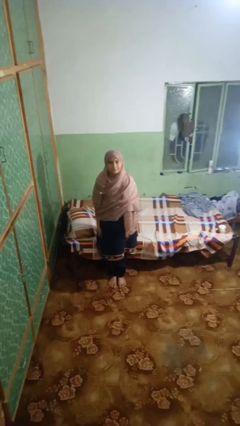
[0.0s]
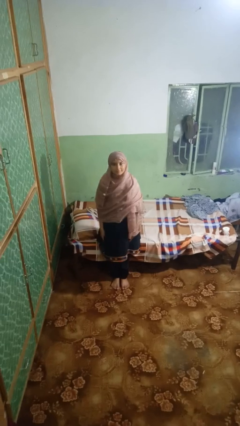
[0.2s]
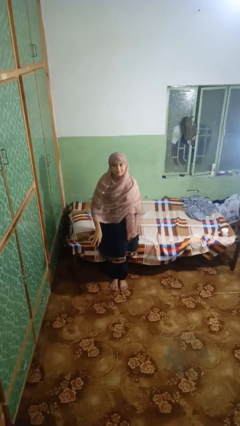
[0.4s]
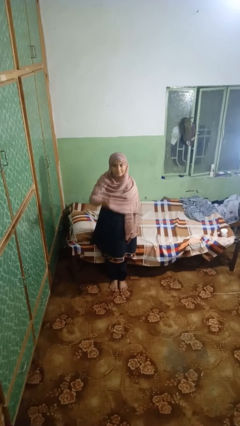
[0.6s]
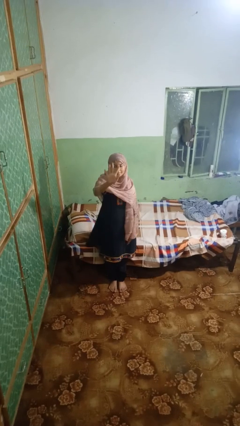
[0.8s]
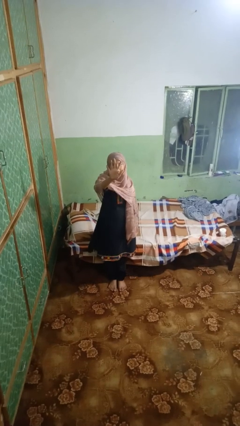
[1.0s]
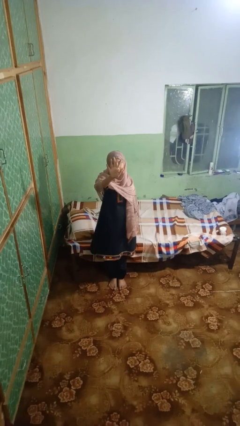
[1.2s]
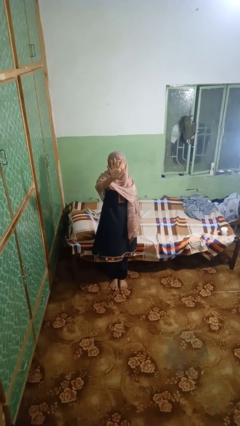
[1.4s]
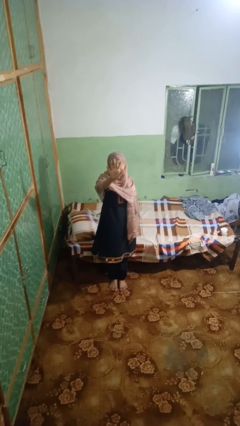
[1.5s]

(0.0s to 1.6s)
person gestures number five

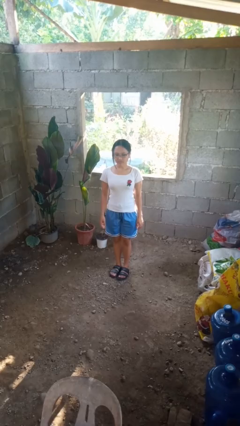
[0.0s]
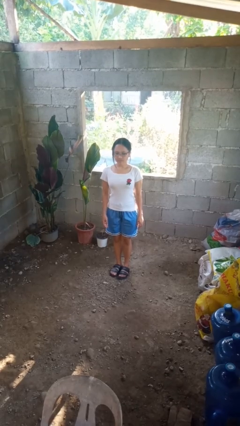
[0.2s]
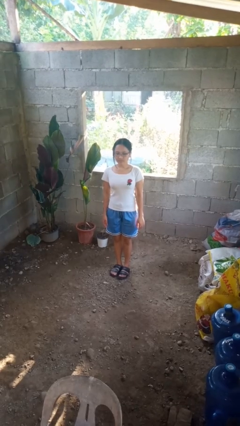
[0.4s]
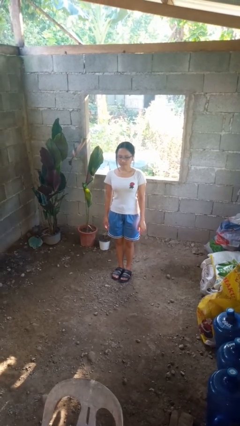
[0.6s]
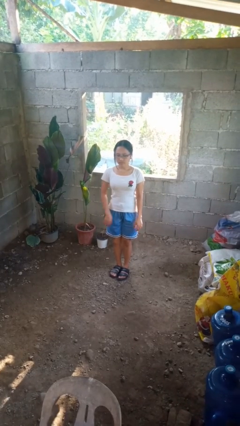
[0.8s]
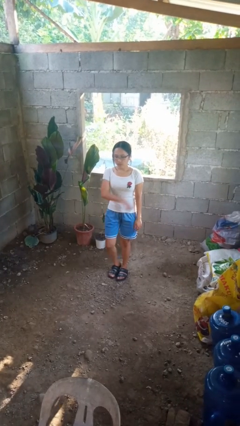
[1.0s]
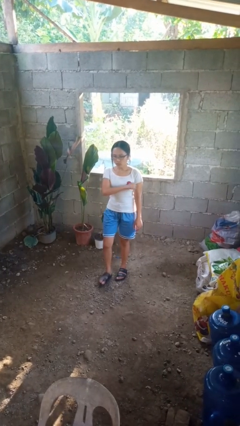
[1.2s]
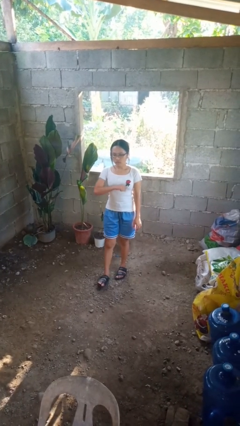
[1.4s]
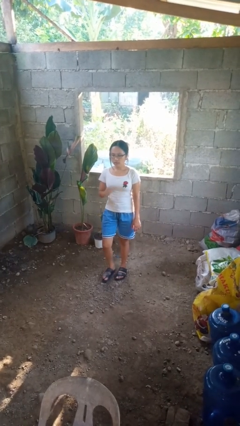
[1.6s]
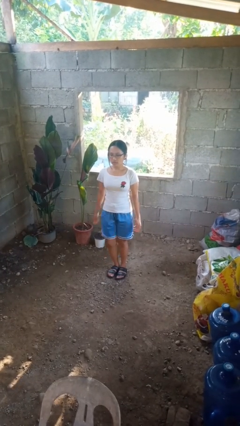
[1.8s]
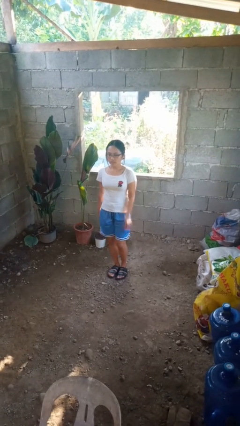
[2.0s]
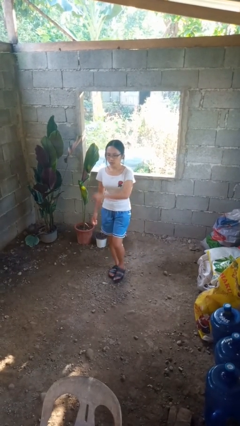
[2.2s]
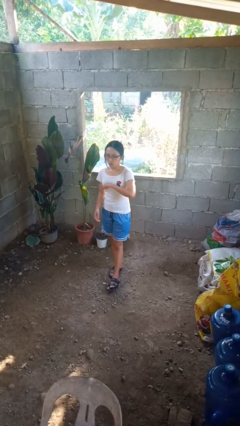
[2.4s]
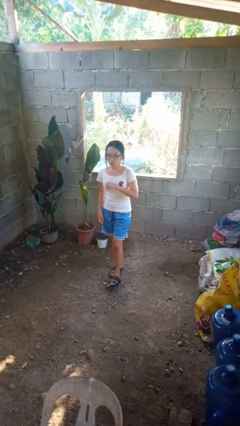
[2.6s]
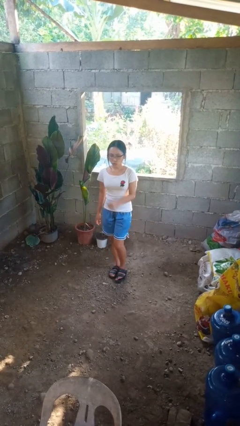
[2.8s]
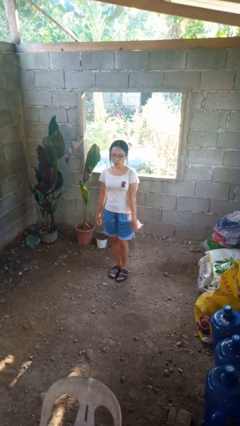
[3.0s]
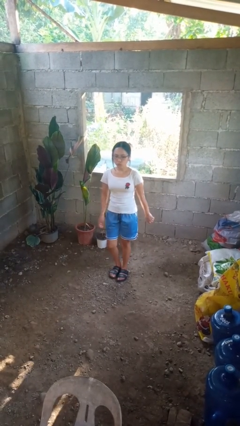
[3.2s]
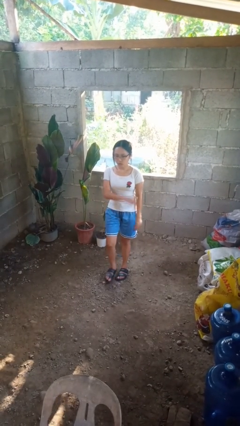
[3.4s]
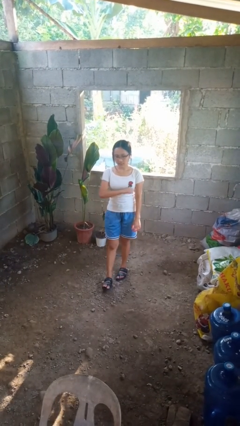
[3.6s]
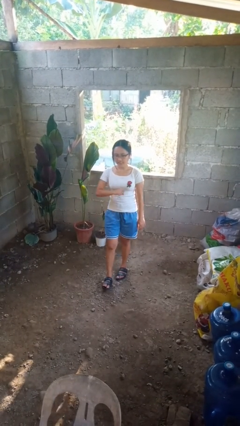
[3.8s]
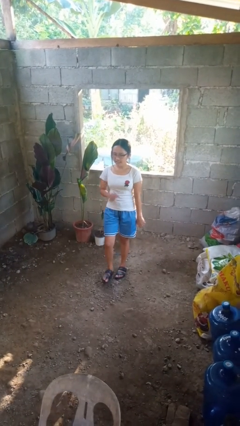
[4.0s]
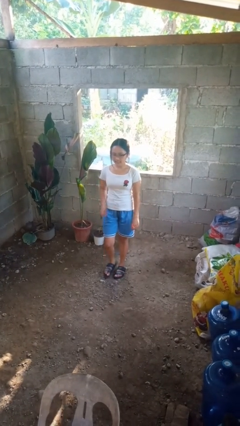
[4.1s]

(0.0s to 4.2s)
person dances in place

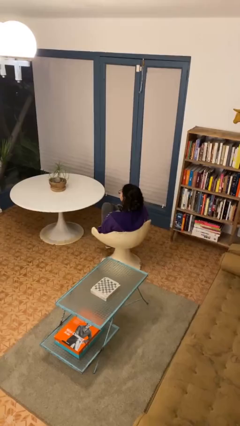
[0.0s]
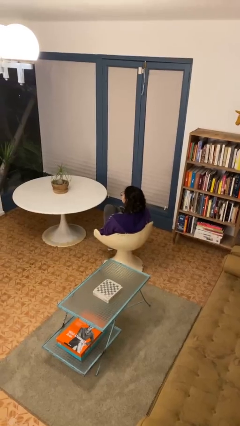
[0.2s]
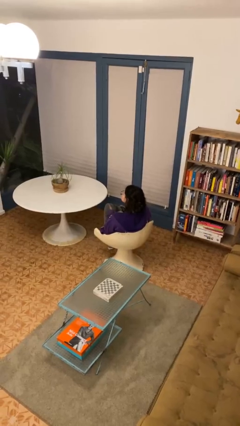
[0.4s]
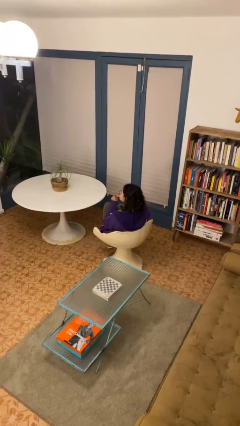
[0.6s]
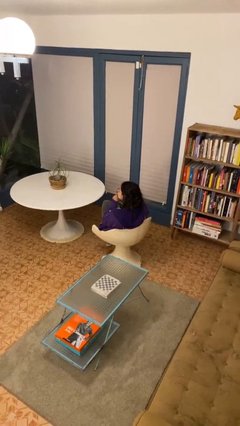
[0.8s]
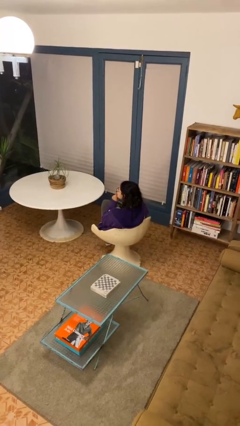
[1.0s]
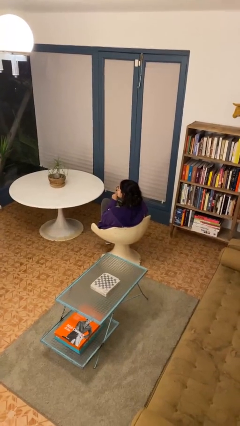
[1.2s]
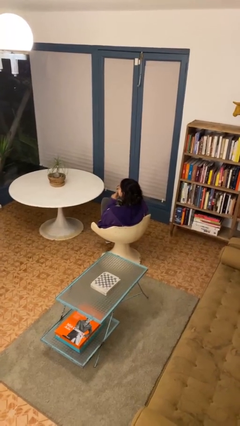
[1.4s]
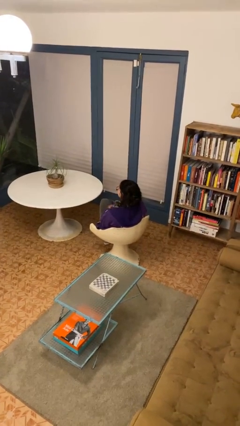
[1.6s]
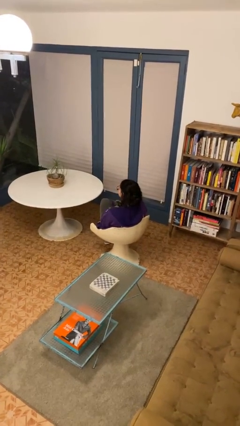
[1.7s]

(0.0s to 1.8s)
person gestures be quiet

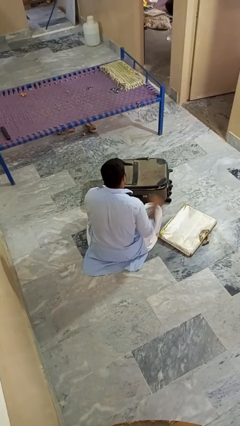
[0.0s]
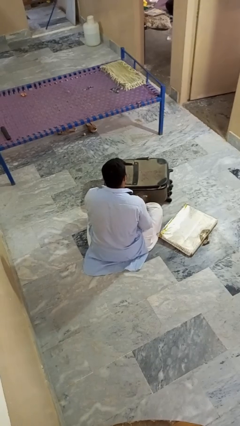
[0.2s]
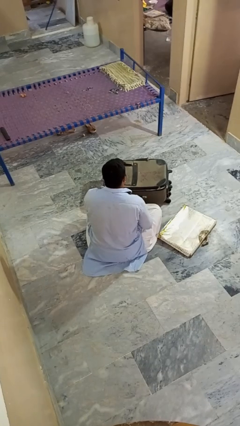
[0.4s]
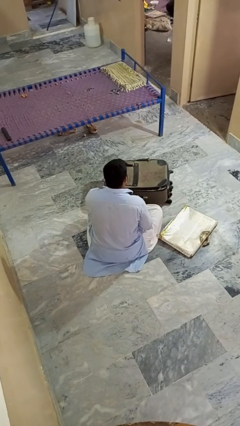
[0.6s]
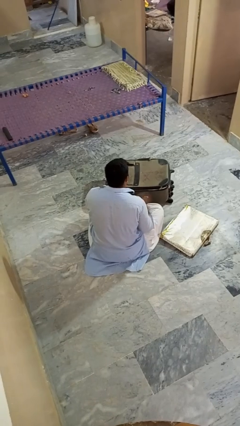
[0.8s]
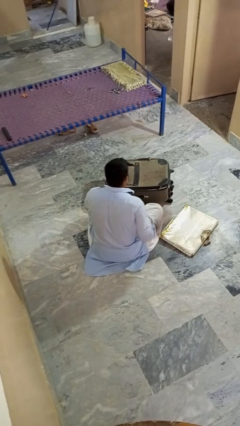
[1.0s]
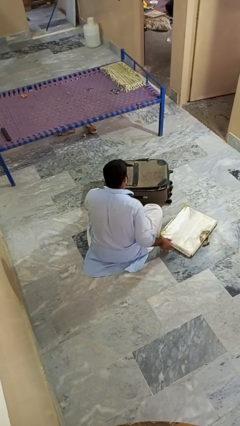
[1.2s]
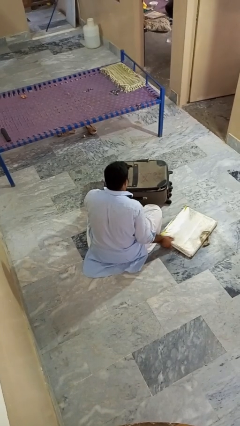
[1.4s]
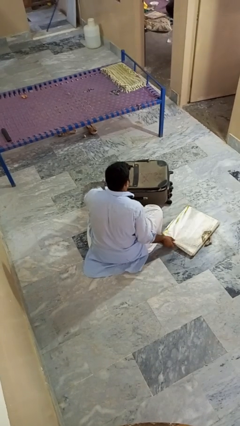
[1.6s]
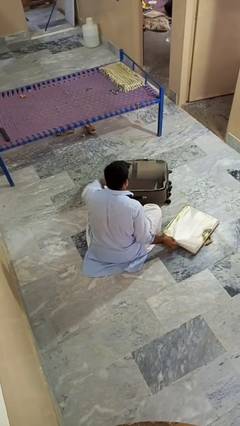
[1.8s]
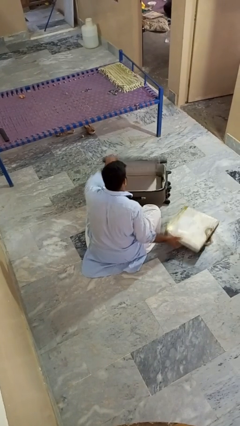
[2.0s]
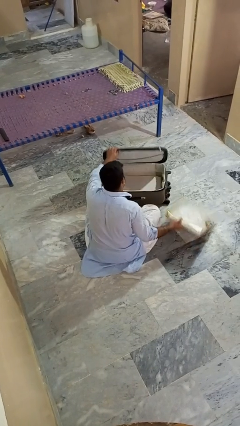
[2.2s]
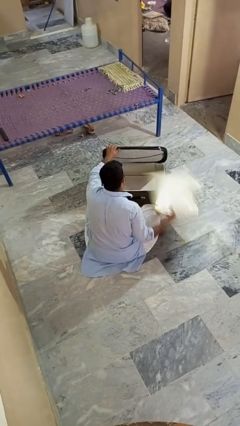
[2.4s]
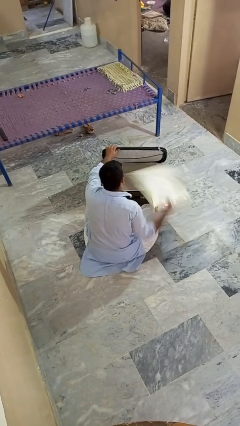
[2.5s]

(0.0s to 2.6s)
person puts object into bag

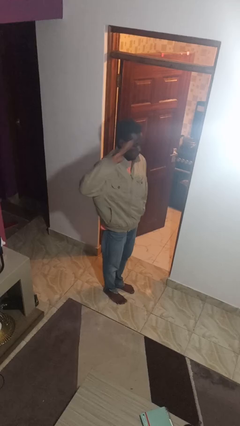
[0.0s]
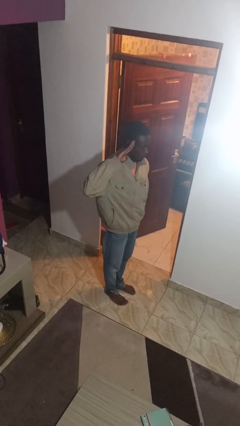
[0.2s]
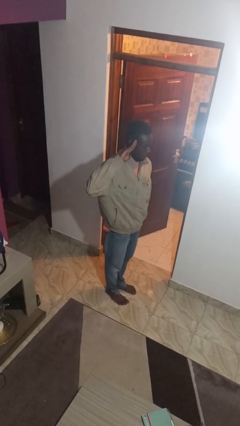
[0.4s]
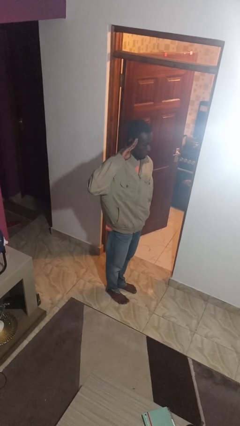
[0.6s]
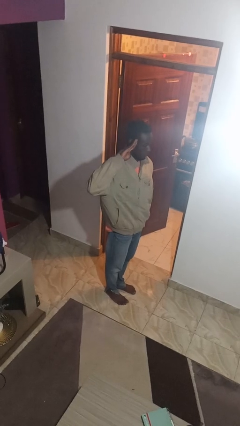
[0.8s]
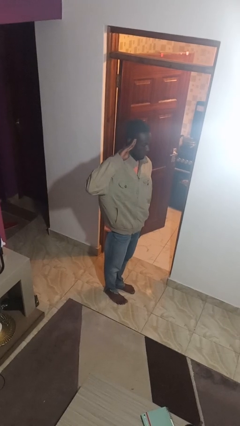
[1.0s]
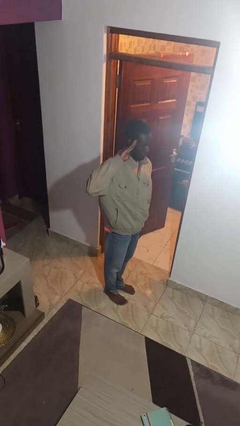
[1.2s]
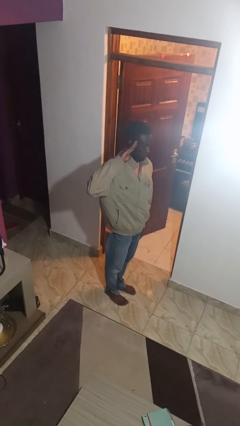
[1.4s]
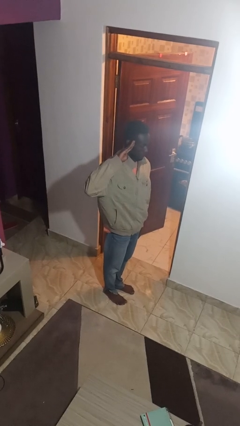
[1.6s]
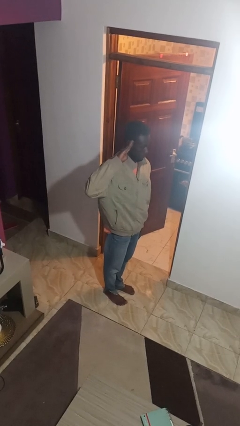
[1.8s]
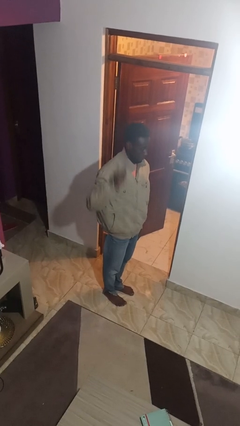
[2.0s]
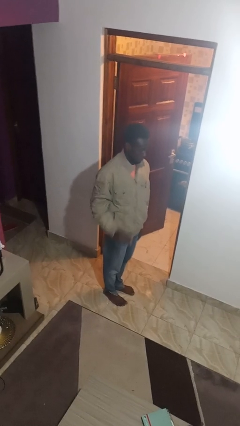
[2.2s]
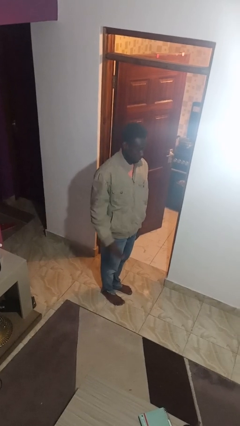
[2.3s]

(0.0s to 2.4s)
person salutes

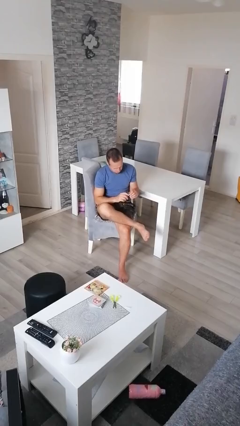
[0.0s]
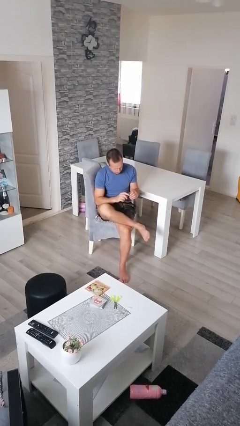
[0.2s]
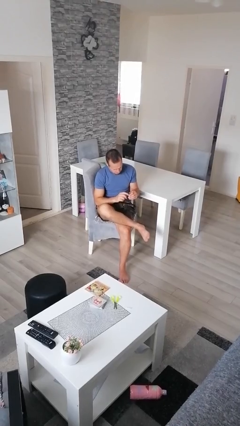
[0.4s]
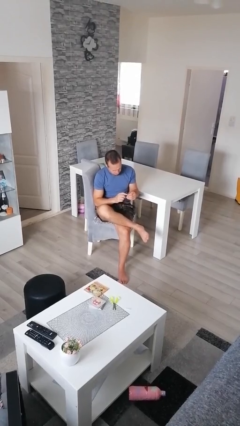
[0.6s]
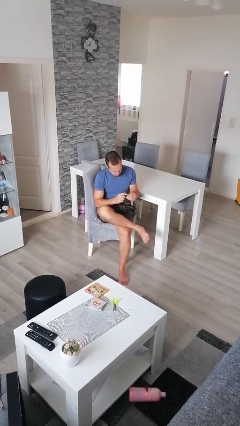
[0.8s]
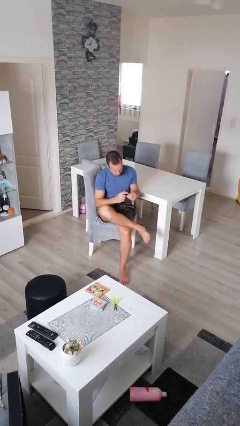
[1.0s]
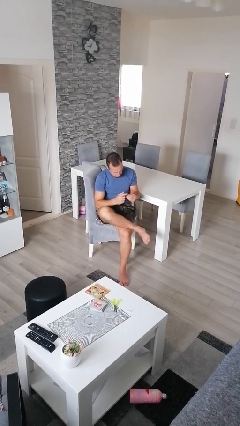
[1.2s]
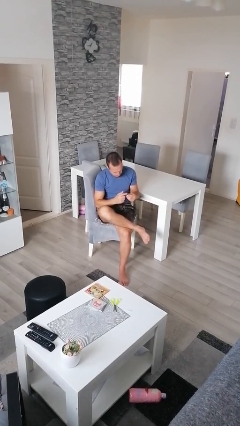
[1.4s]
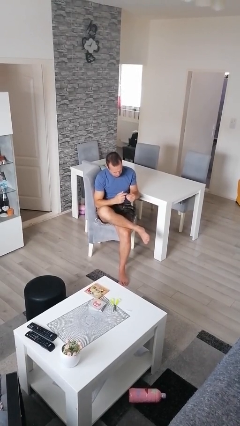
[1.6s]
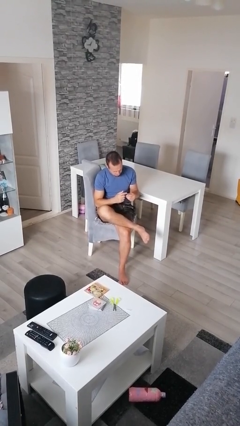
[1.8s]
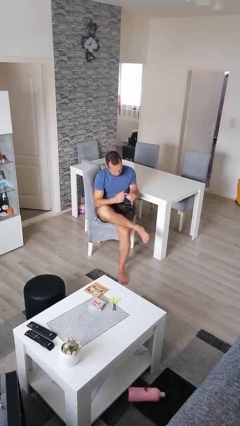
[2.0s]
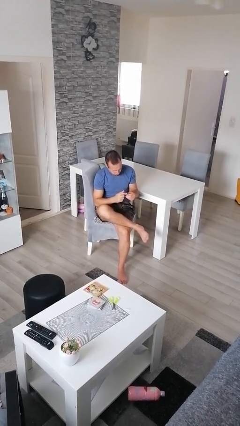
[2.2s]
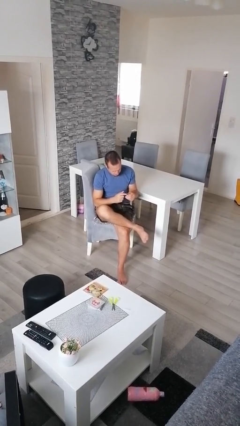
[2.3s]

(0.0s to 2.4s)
person files fingernails

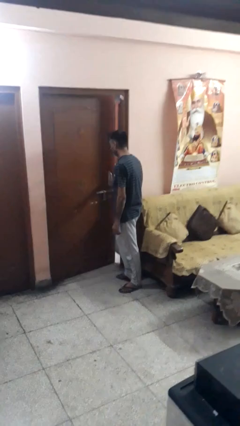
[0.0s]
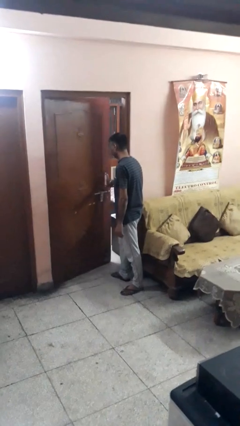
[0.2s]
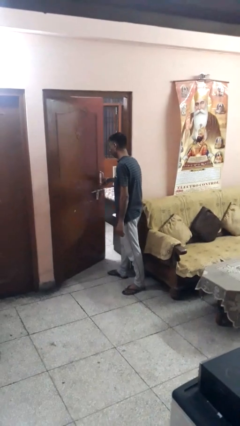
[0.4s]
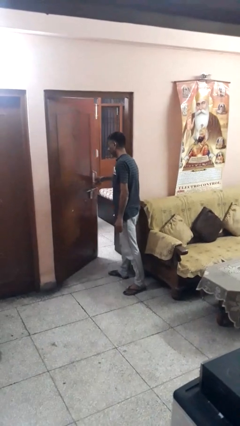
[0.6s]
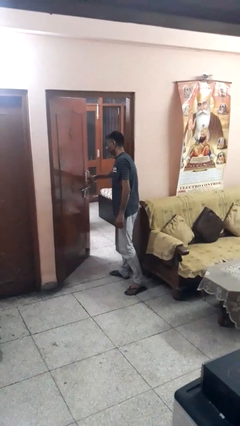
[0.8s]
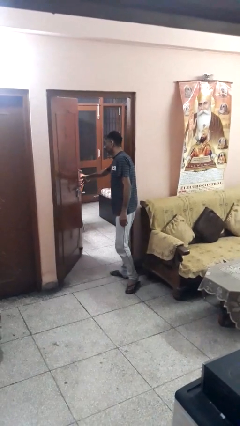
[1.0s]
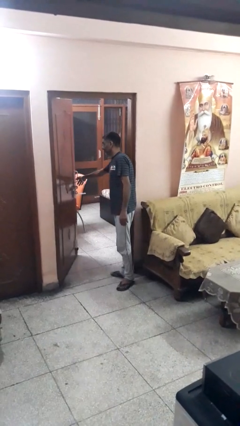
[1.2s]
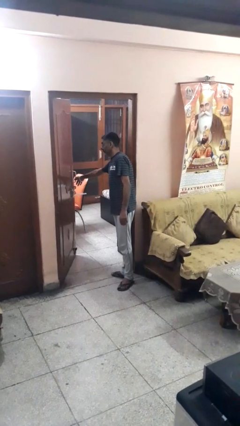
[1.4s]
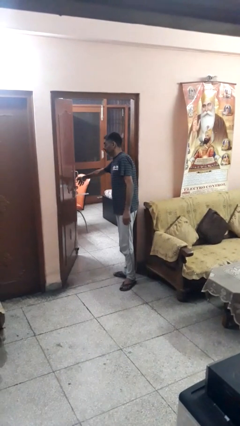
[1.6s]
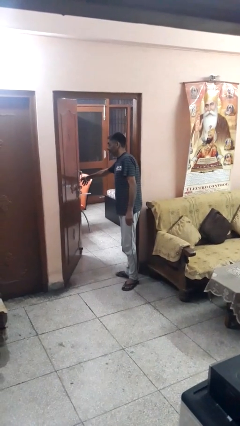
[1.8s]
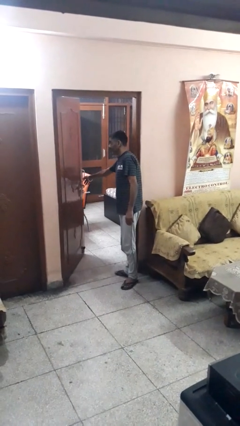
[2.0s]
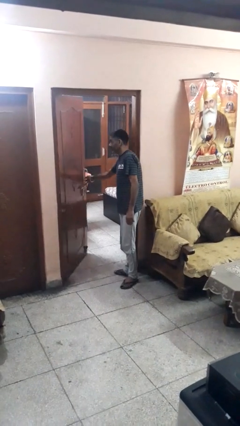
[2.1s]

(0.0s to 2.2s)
person opens facility door
